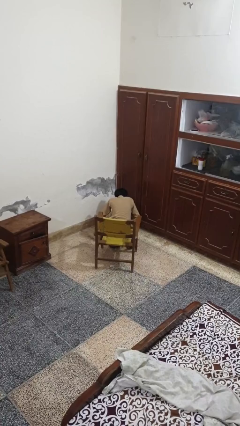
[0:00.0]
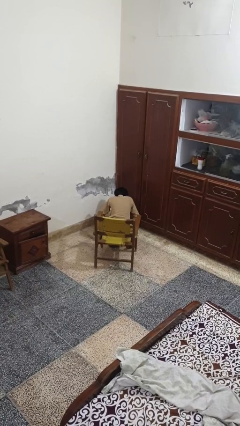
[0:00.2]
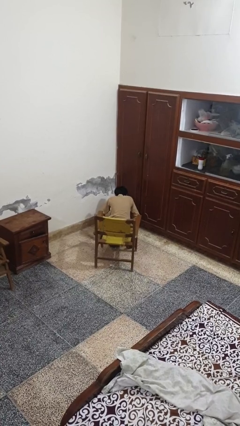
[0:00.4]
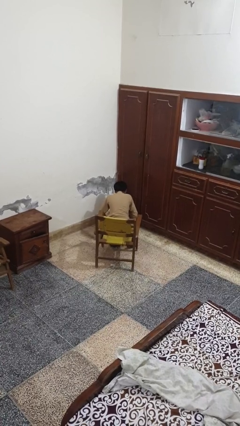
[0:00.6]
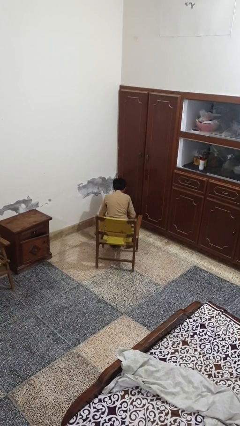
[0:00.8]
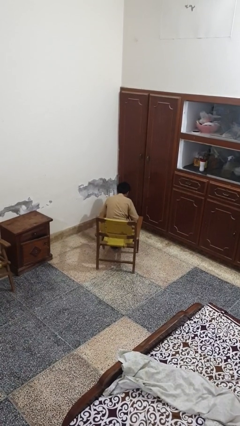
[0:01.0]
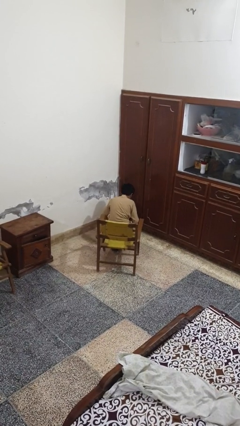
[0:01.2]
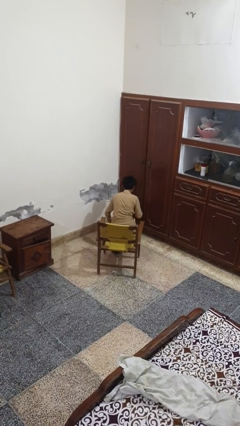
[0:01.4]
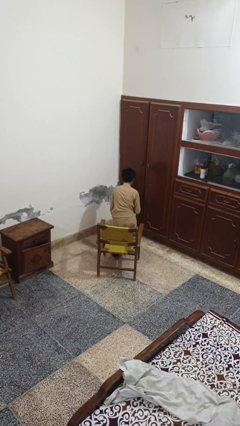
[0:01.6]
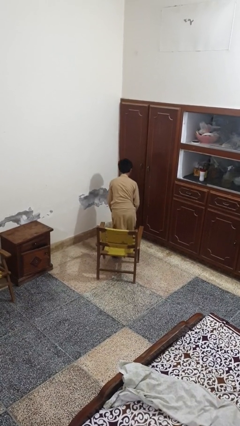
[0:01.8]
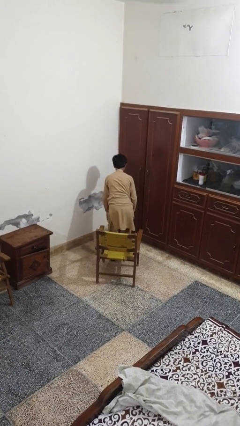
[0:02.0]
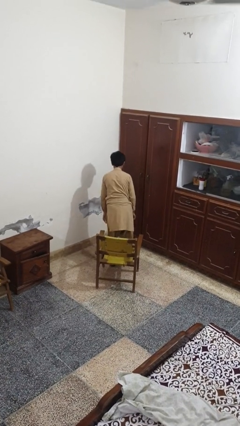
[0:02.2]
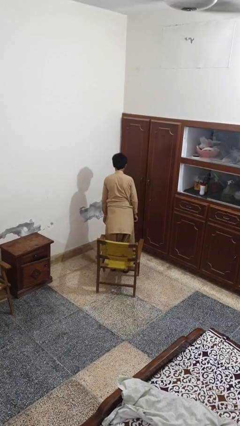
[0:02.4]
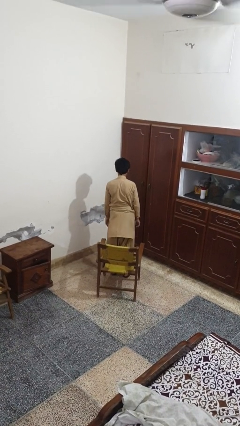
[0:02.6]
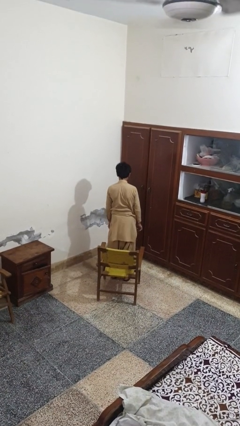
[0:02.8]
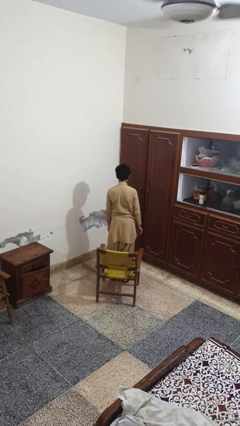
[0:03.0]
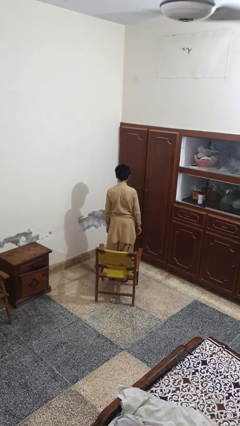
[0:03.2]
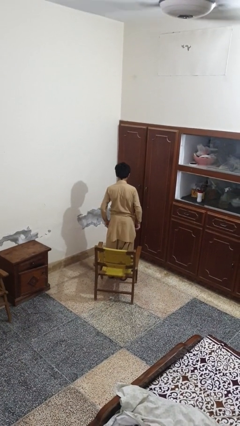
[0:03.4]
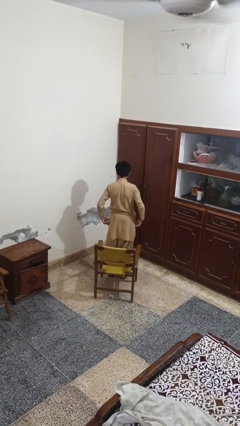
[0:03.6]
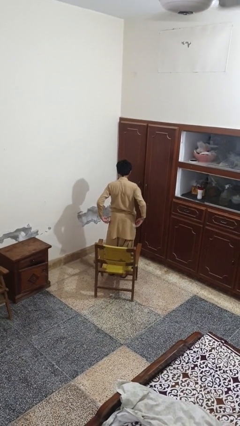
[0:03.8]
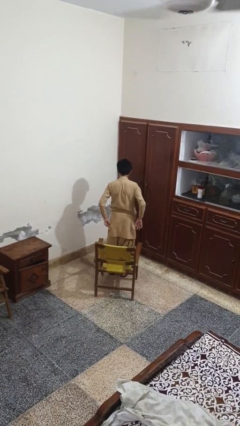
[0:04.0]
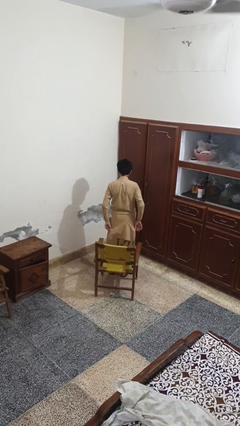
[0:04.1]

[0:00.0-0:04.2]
person stands up from floor

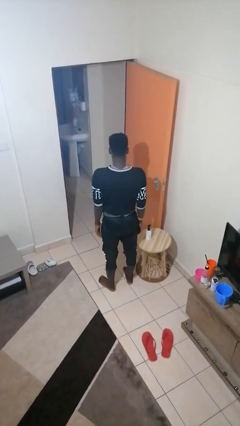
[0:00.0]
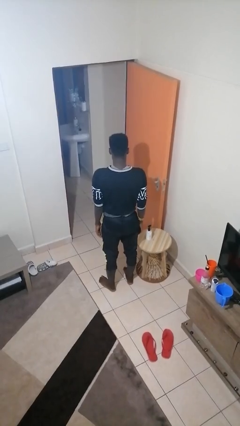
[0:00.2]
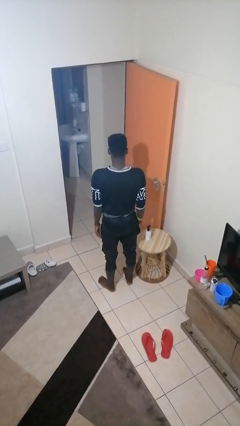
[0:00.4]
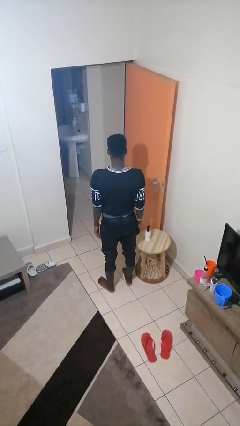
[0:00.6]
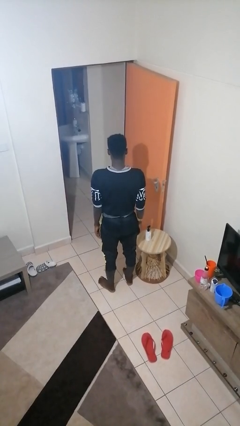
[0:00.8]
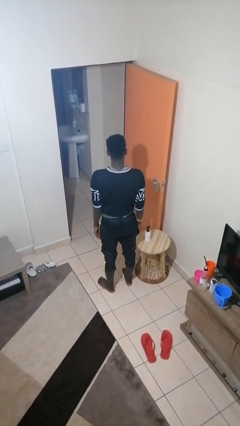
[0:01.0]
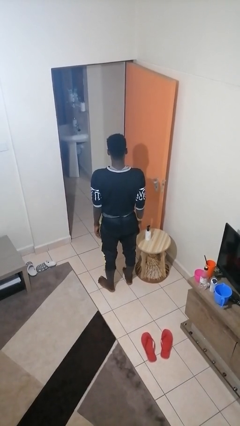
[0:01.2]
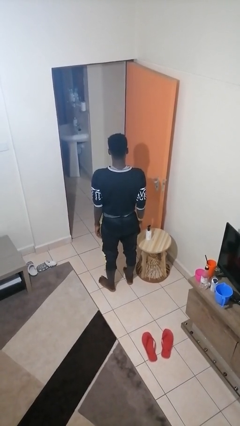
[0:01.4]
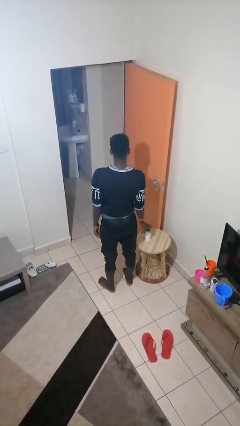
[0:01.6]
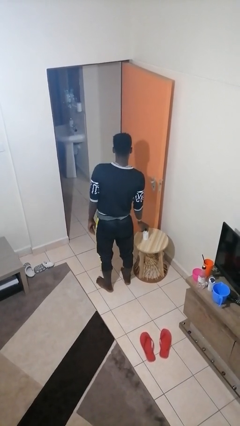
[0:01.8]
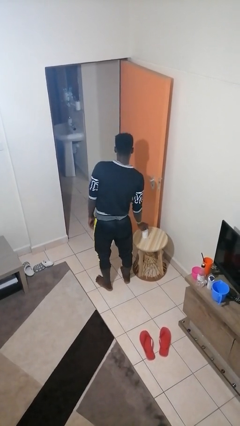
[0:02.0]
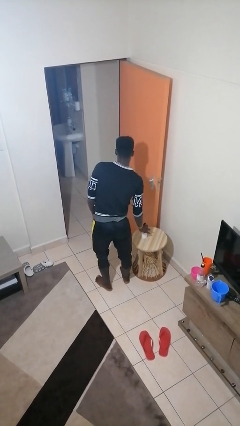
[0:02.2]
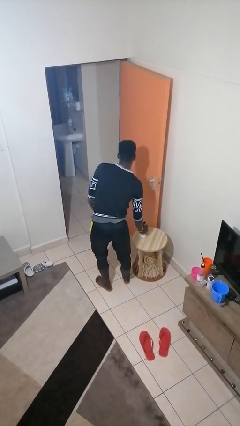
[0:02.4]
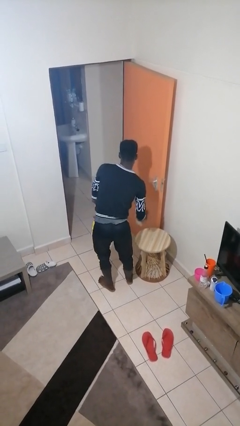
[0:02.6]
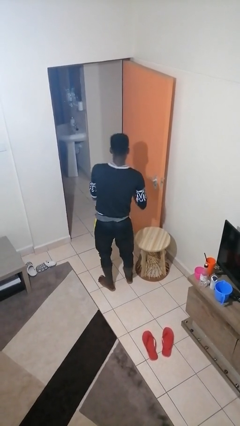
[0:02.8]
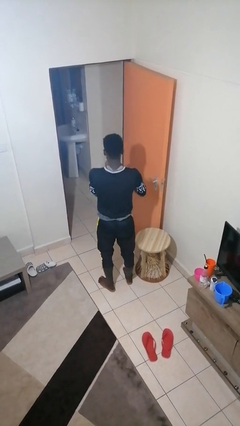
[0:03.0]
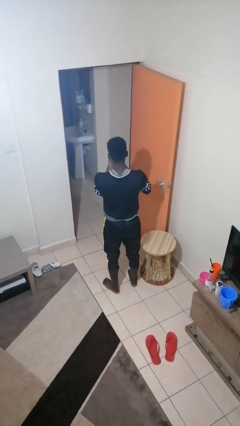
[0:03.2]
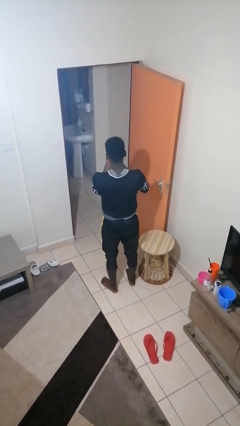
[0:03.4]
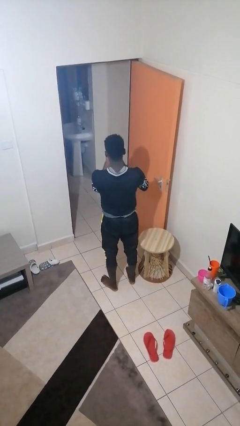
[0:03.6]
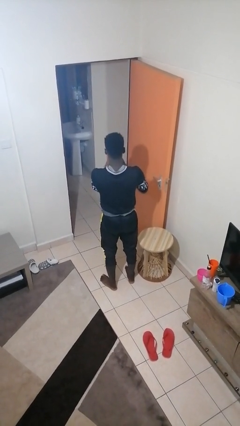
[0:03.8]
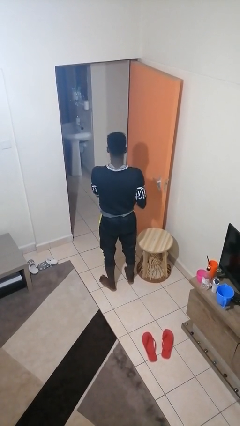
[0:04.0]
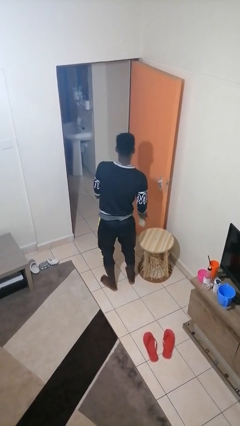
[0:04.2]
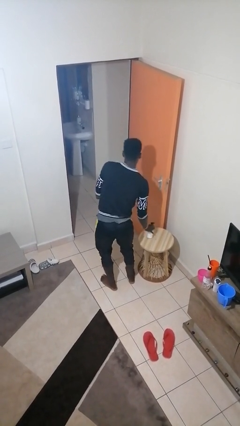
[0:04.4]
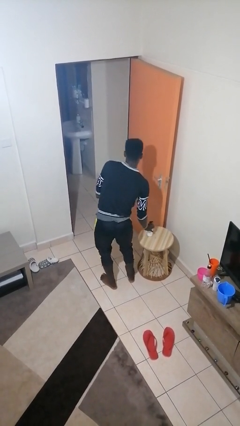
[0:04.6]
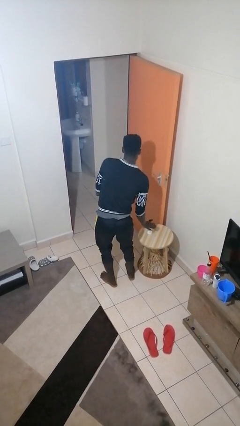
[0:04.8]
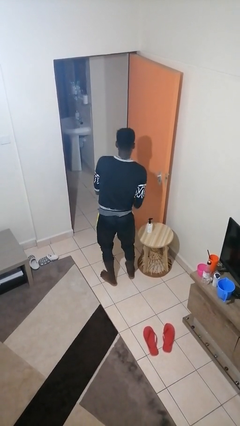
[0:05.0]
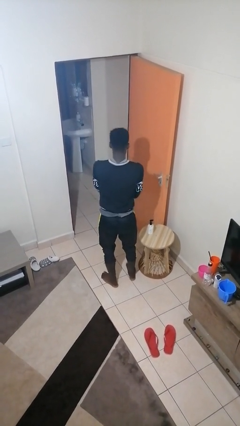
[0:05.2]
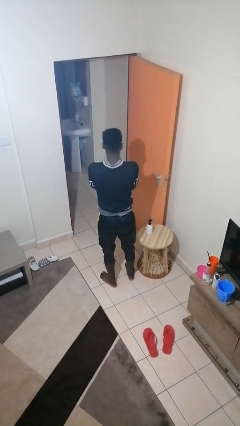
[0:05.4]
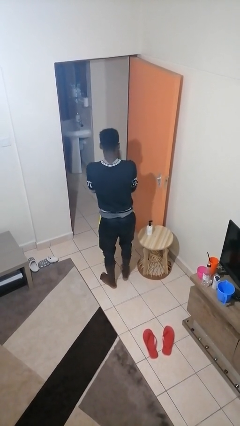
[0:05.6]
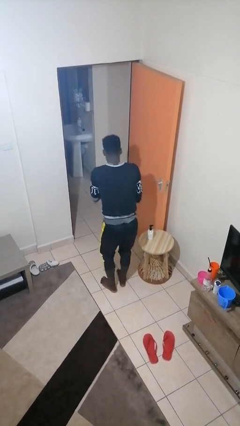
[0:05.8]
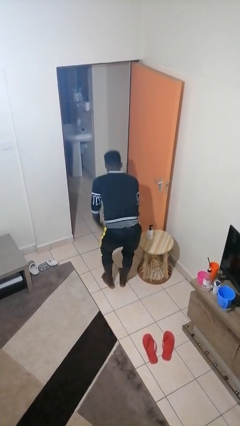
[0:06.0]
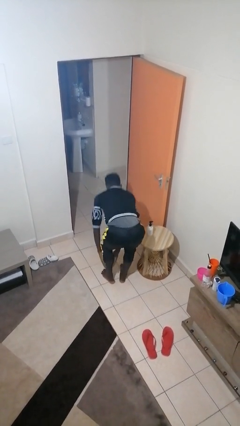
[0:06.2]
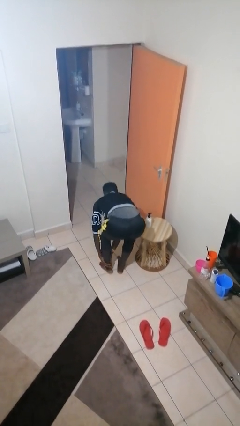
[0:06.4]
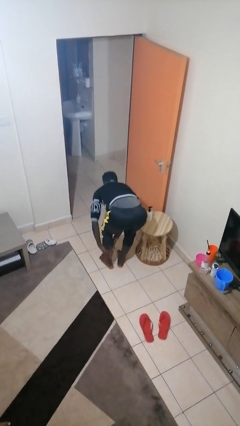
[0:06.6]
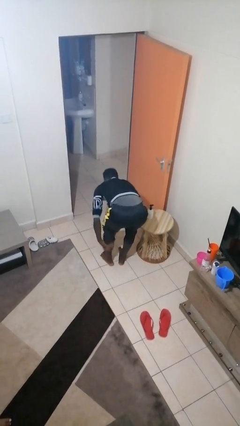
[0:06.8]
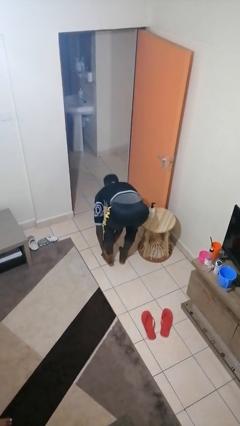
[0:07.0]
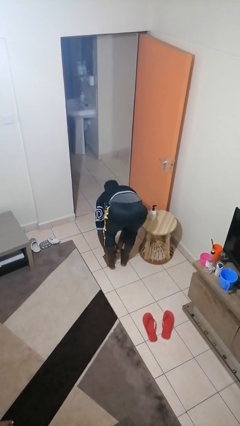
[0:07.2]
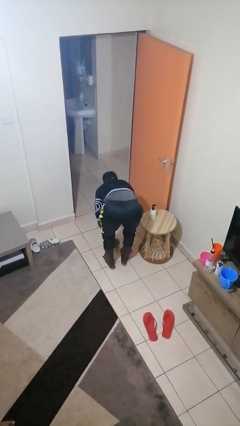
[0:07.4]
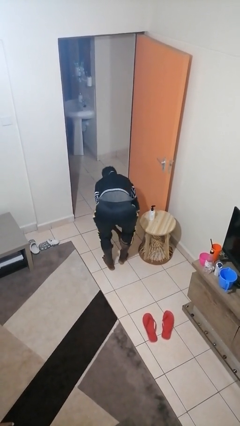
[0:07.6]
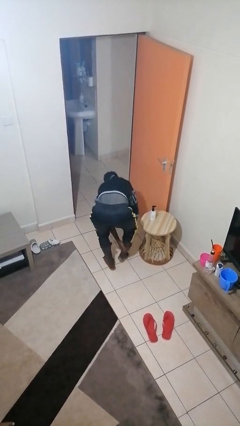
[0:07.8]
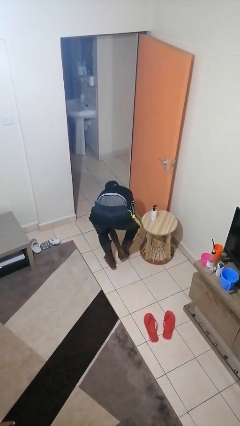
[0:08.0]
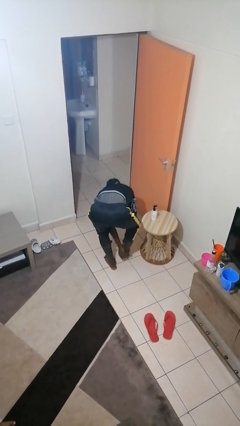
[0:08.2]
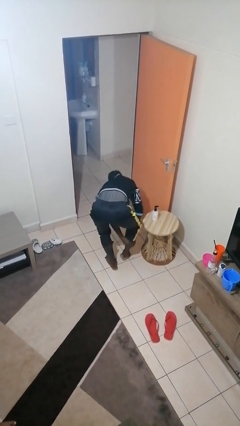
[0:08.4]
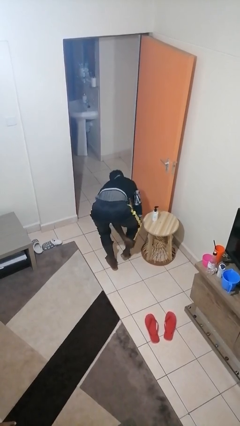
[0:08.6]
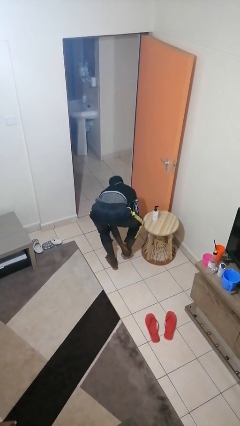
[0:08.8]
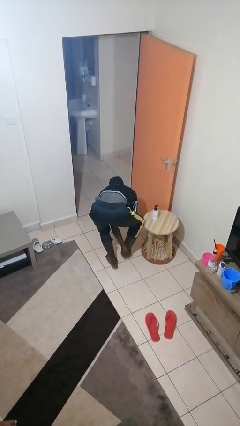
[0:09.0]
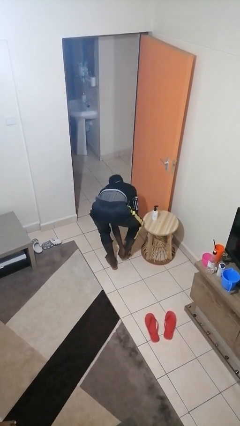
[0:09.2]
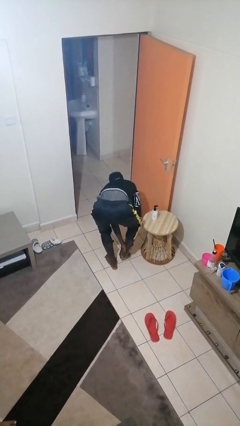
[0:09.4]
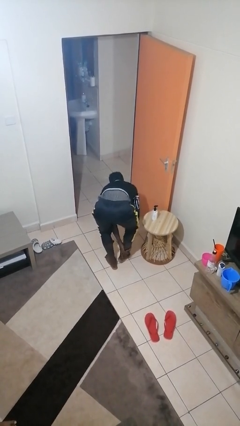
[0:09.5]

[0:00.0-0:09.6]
person applies sunscreen

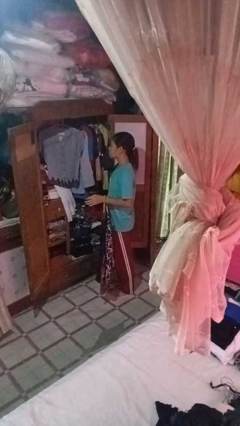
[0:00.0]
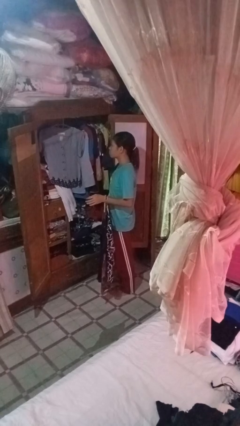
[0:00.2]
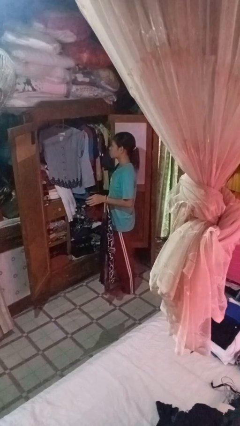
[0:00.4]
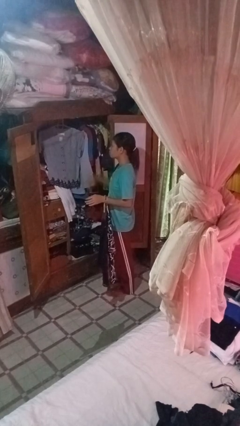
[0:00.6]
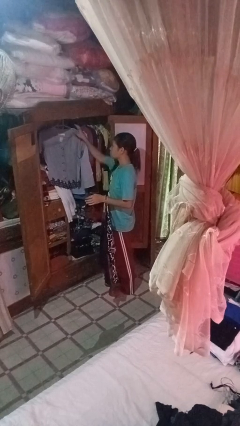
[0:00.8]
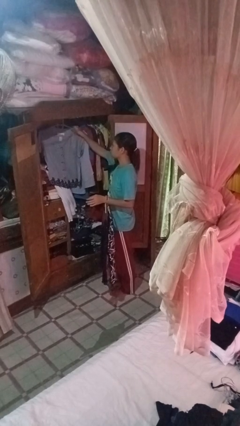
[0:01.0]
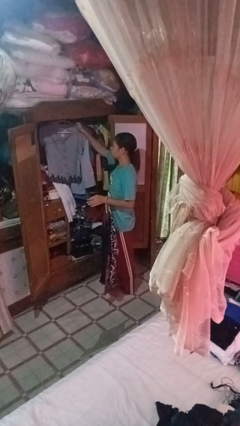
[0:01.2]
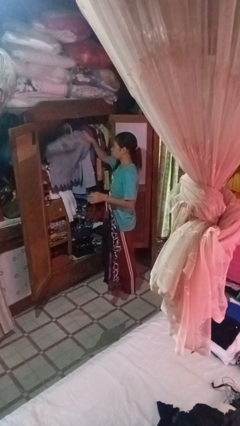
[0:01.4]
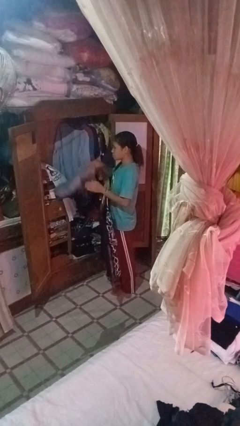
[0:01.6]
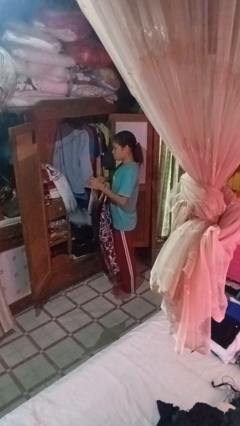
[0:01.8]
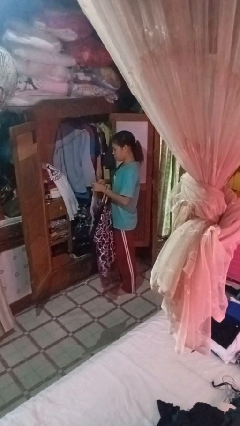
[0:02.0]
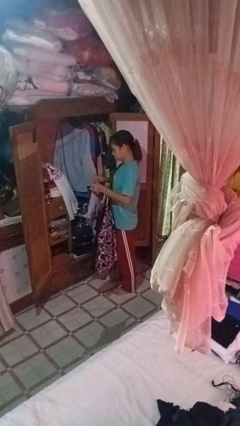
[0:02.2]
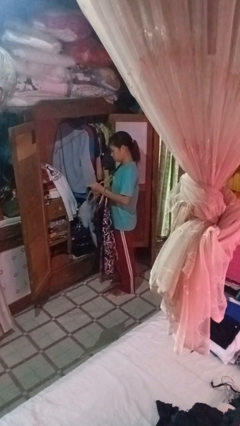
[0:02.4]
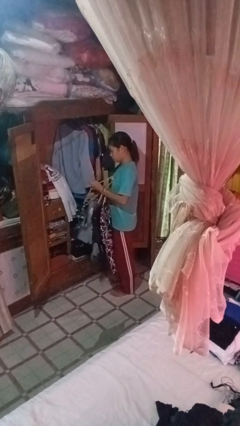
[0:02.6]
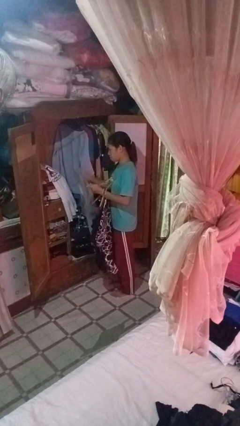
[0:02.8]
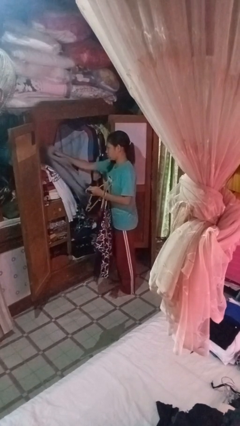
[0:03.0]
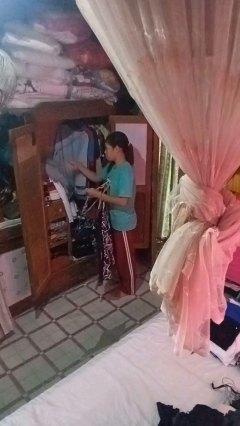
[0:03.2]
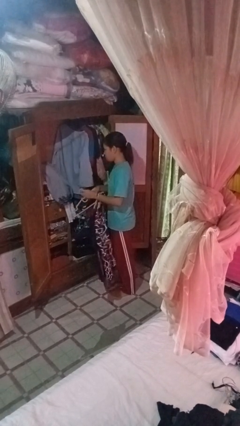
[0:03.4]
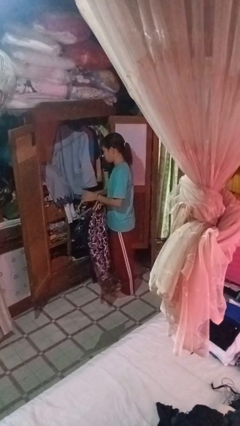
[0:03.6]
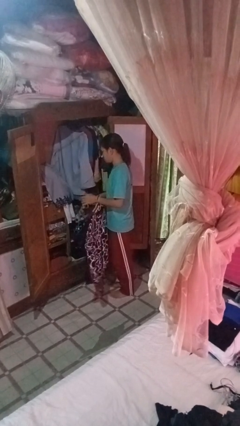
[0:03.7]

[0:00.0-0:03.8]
person takes clothes from closet

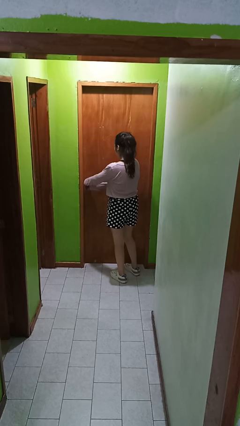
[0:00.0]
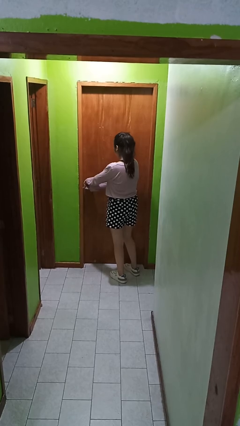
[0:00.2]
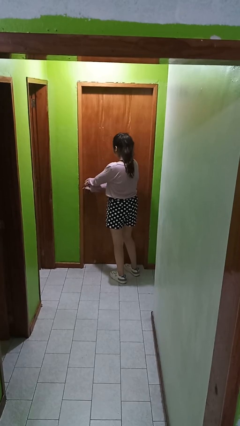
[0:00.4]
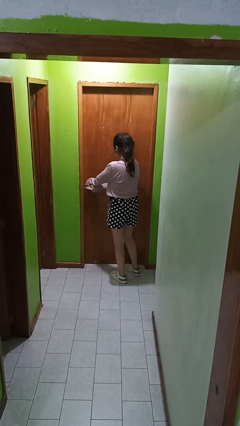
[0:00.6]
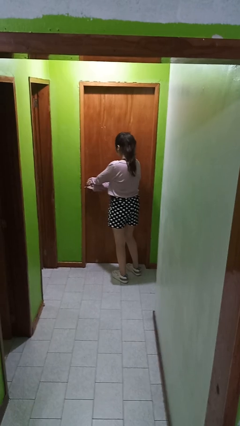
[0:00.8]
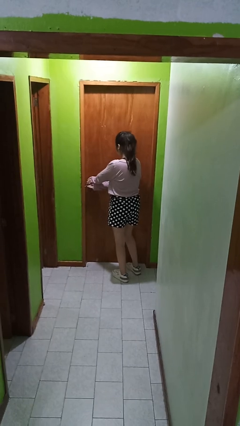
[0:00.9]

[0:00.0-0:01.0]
person unlocks door with keys
